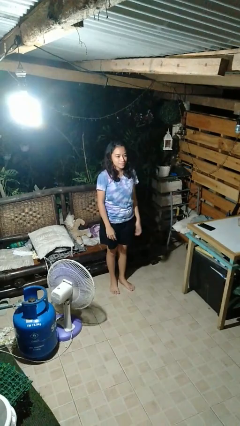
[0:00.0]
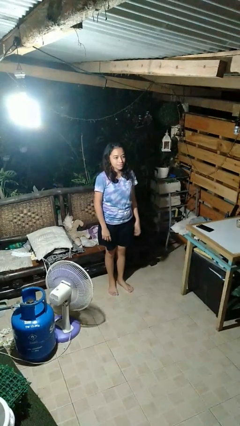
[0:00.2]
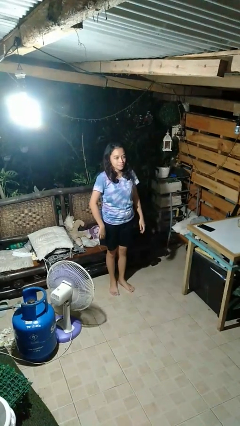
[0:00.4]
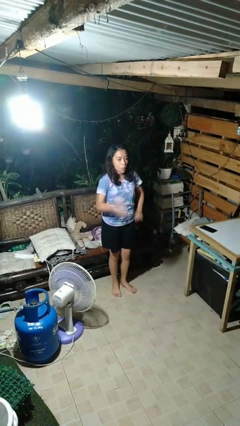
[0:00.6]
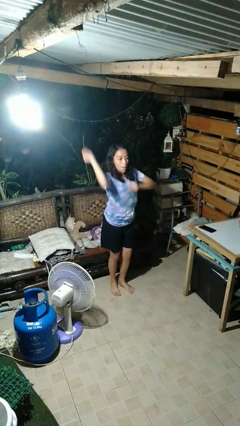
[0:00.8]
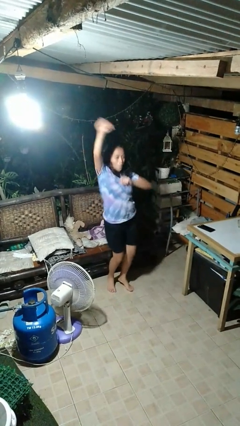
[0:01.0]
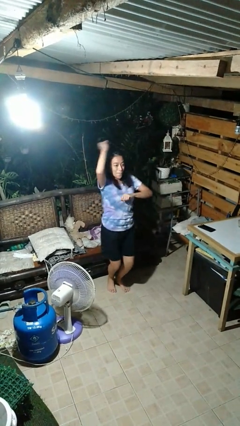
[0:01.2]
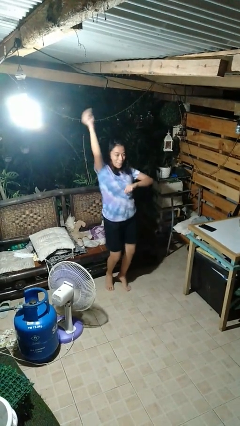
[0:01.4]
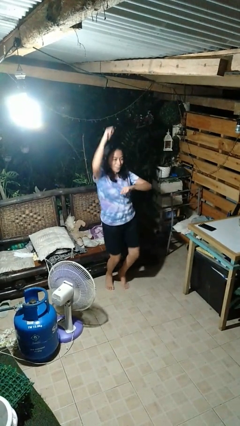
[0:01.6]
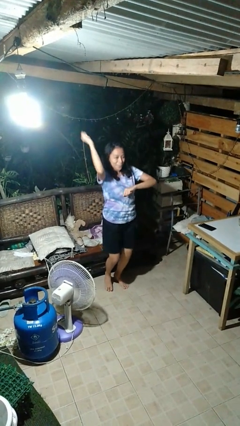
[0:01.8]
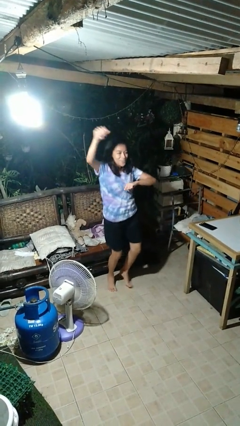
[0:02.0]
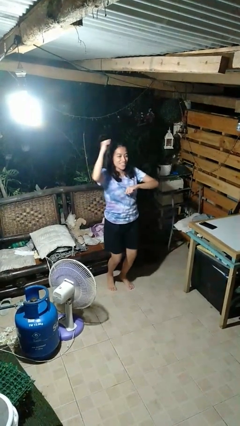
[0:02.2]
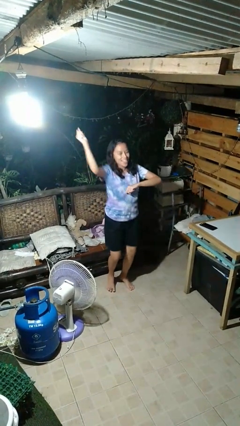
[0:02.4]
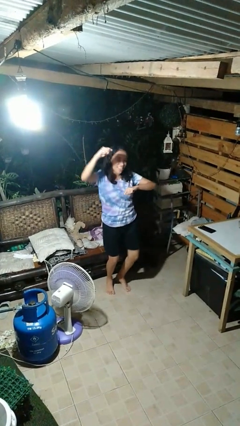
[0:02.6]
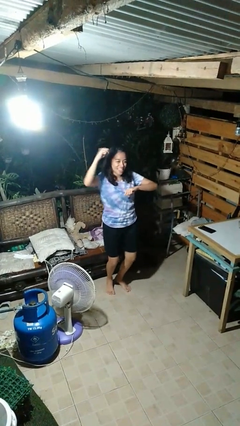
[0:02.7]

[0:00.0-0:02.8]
person dances in place

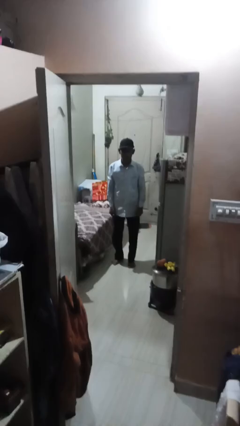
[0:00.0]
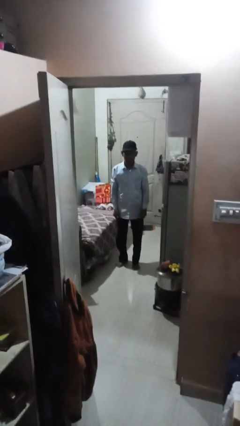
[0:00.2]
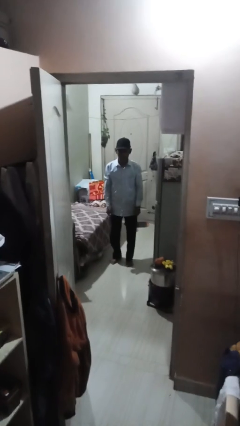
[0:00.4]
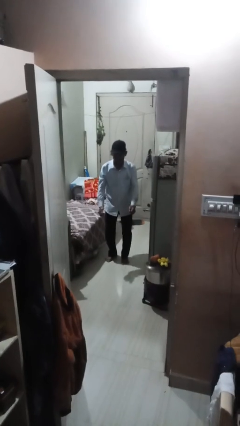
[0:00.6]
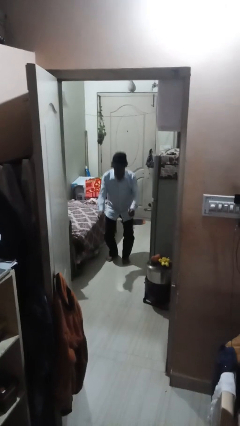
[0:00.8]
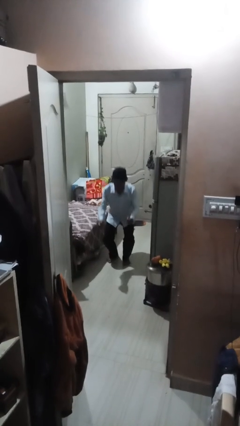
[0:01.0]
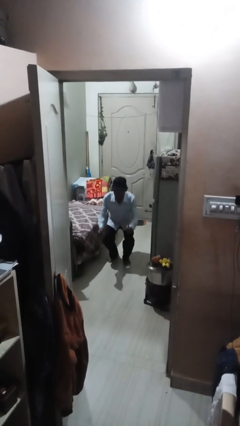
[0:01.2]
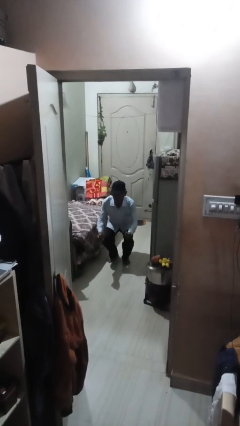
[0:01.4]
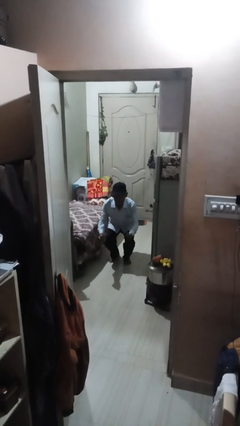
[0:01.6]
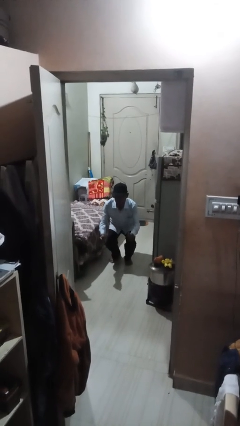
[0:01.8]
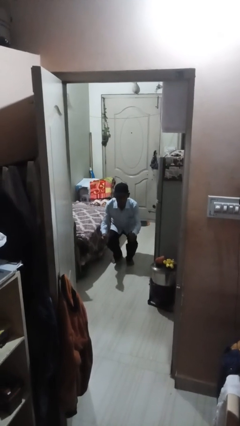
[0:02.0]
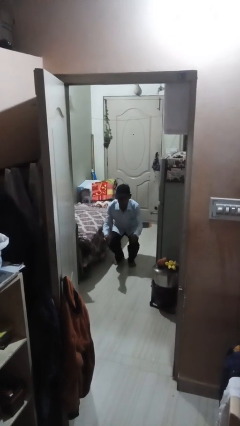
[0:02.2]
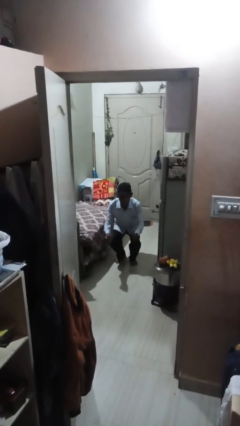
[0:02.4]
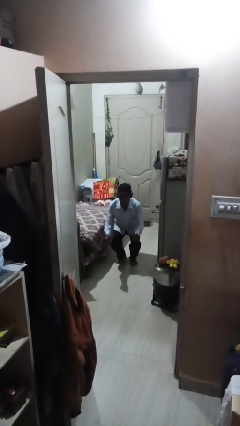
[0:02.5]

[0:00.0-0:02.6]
person squats

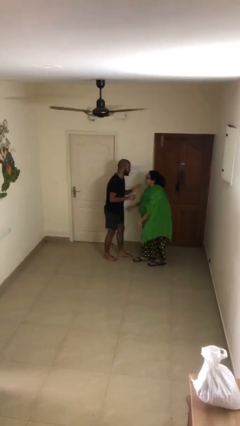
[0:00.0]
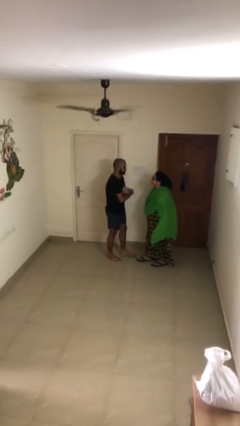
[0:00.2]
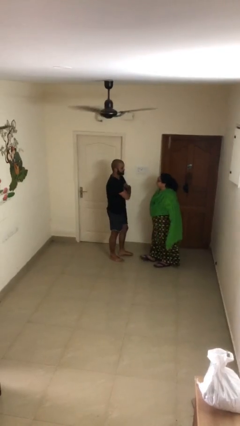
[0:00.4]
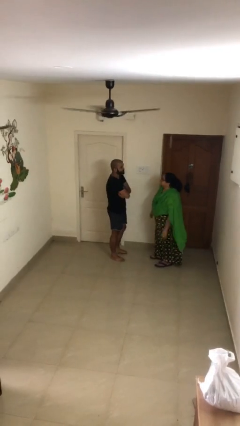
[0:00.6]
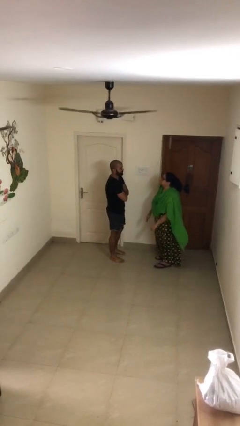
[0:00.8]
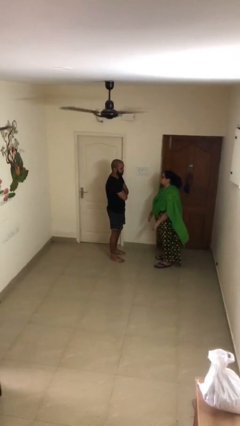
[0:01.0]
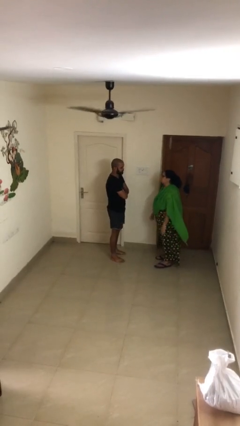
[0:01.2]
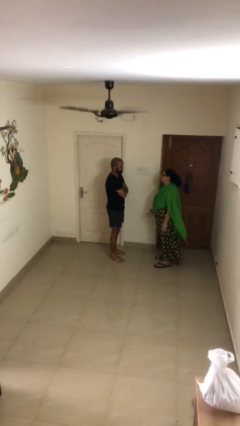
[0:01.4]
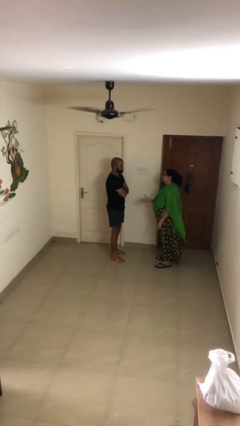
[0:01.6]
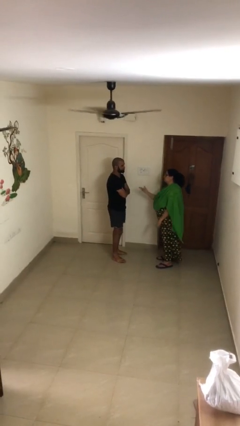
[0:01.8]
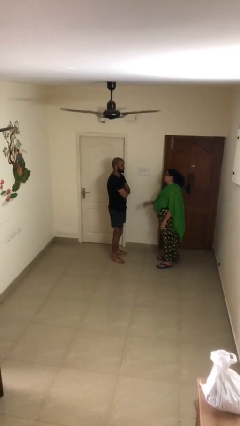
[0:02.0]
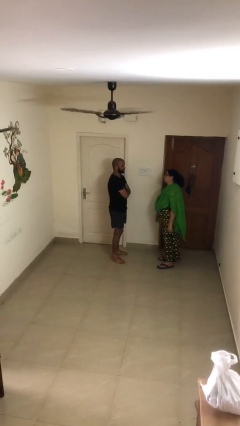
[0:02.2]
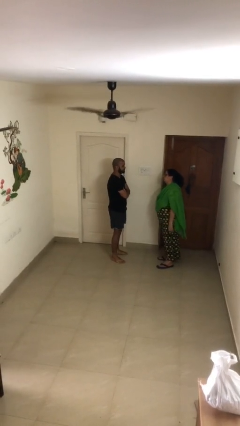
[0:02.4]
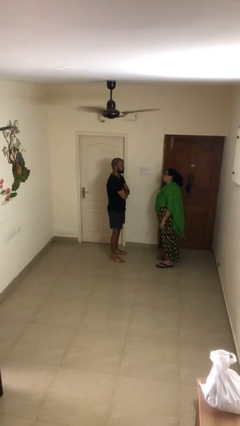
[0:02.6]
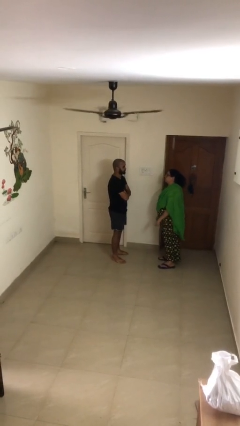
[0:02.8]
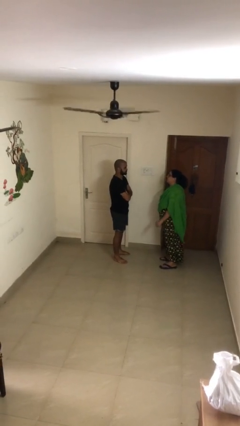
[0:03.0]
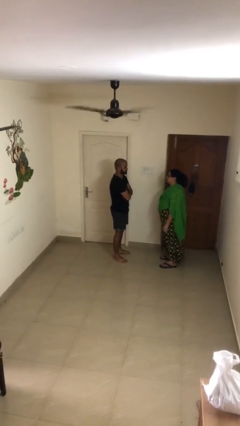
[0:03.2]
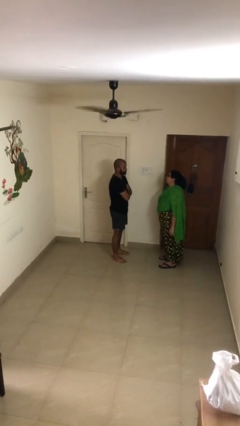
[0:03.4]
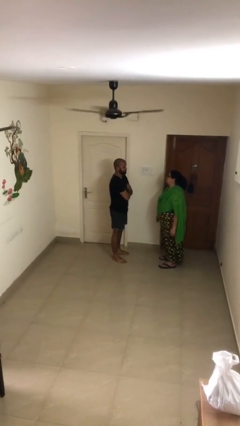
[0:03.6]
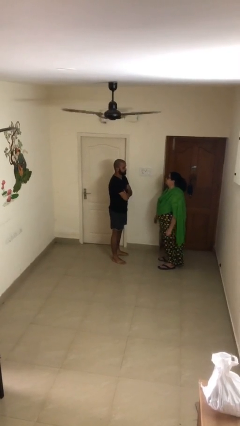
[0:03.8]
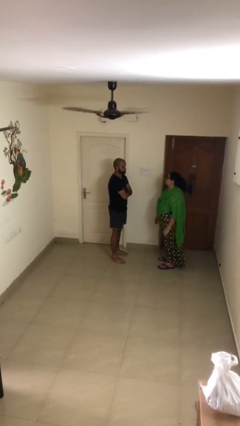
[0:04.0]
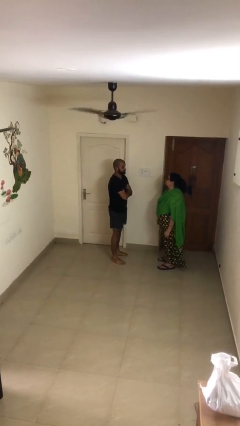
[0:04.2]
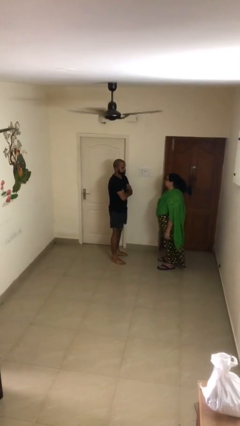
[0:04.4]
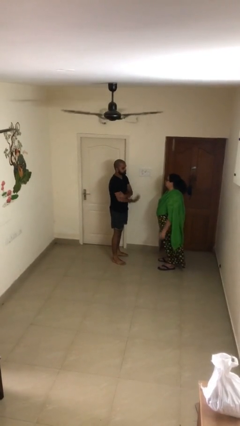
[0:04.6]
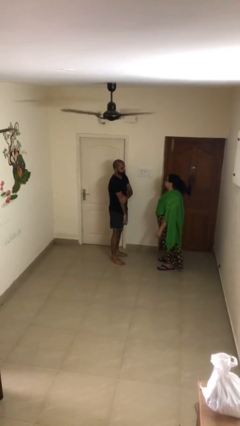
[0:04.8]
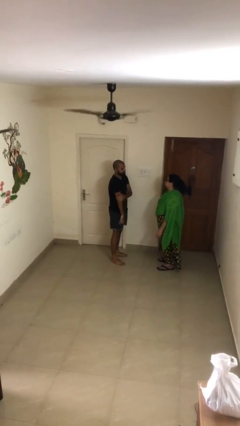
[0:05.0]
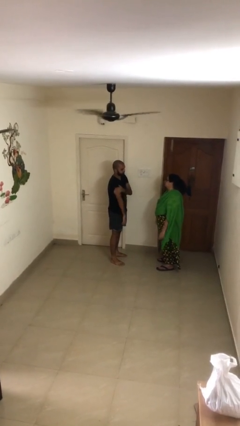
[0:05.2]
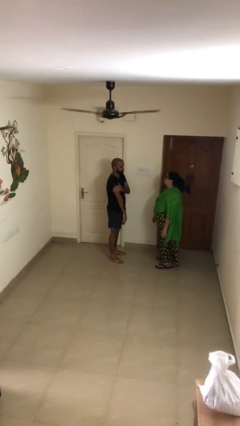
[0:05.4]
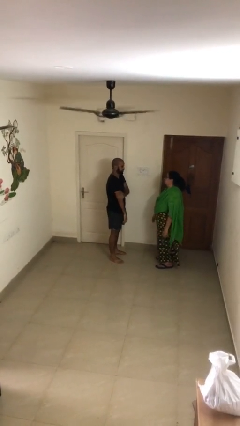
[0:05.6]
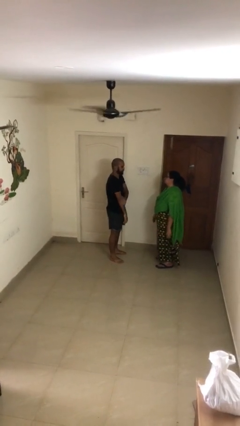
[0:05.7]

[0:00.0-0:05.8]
person talks to person

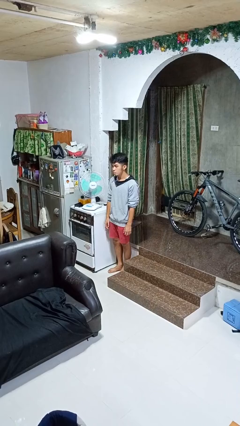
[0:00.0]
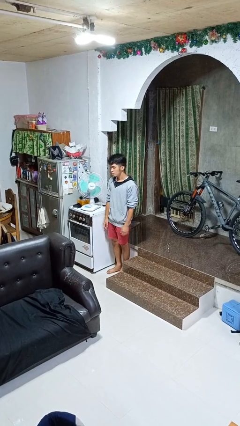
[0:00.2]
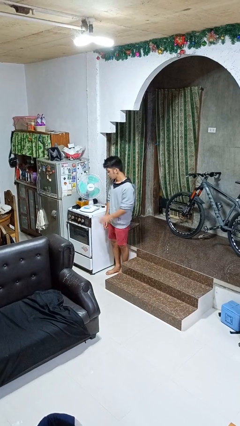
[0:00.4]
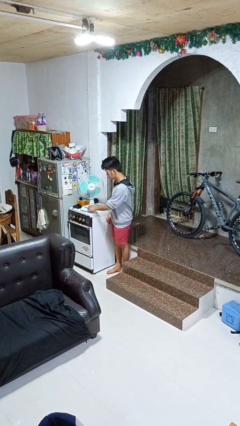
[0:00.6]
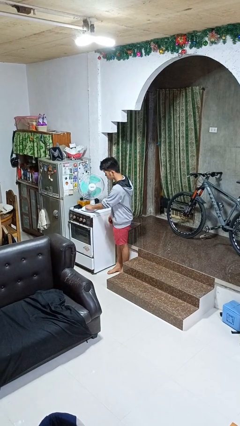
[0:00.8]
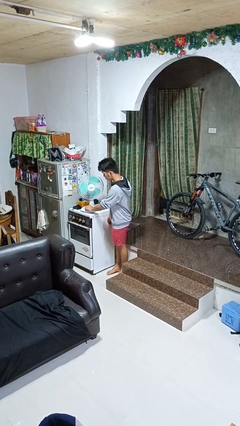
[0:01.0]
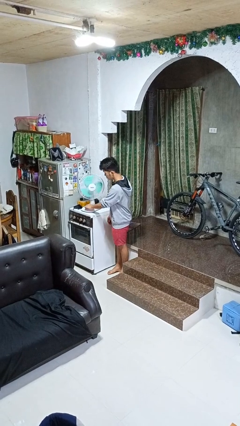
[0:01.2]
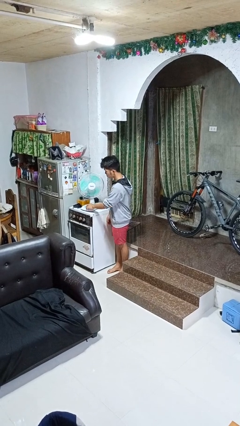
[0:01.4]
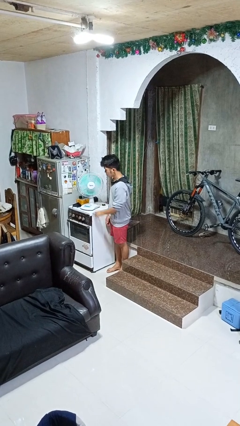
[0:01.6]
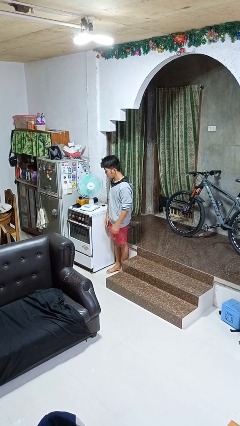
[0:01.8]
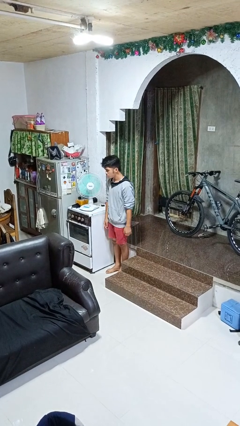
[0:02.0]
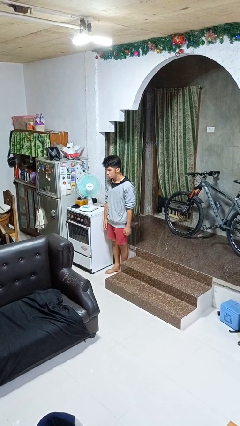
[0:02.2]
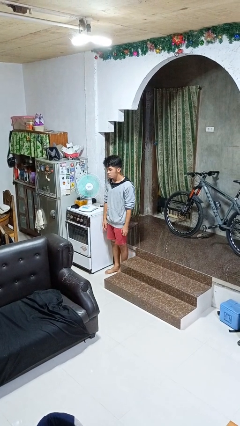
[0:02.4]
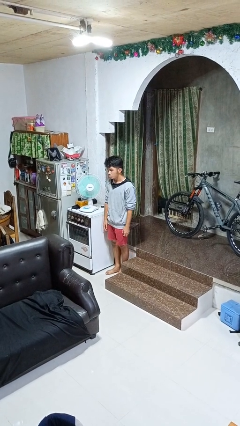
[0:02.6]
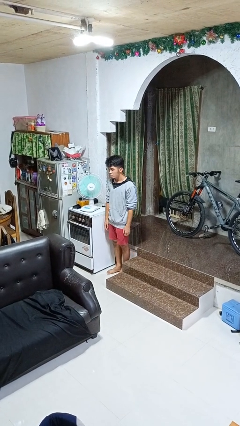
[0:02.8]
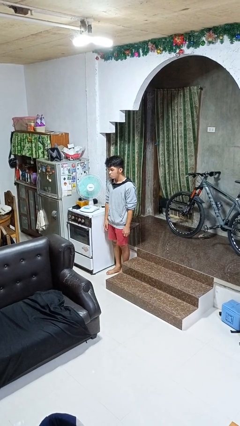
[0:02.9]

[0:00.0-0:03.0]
person turns on fan

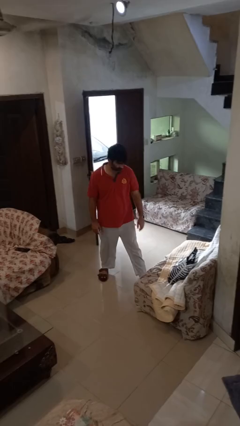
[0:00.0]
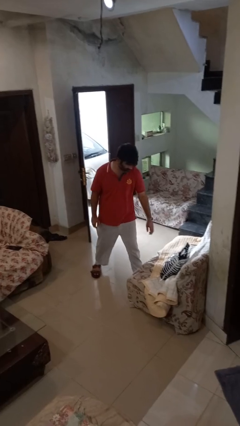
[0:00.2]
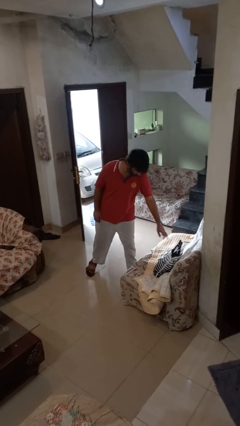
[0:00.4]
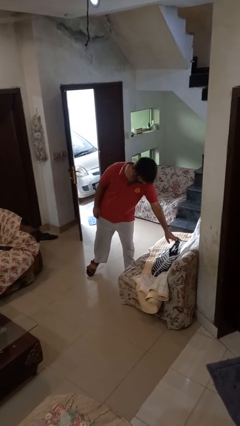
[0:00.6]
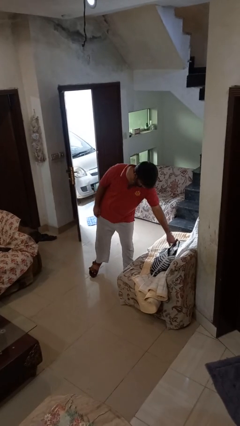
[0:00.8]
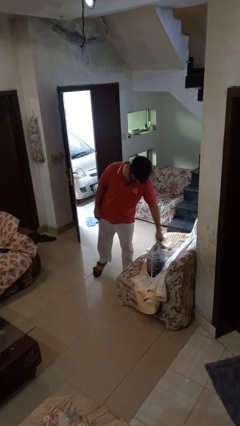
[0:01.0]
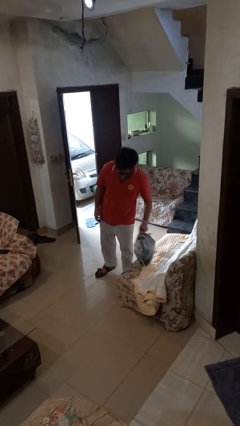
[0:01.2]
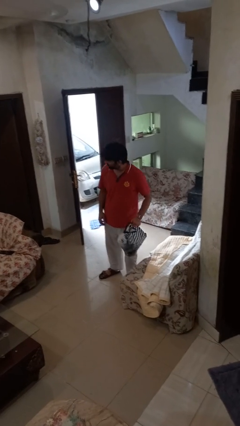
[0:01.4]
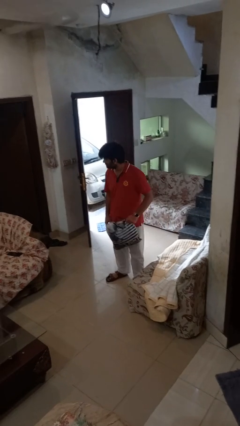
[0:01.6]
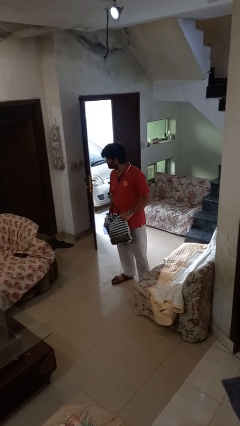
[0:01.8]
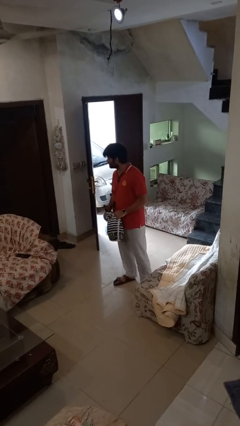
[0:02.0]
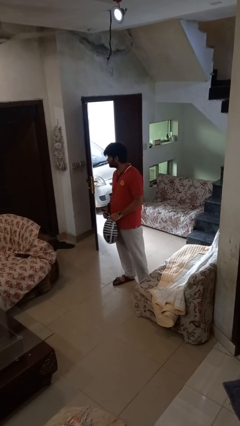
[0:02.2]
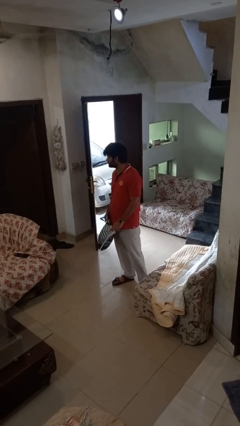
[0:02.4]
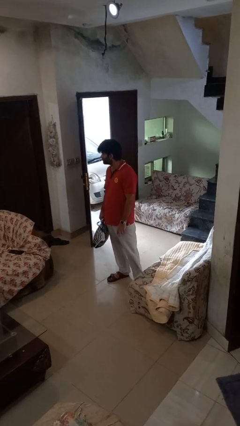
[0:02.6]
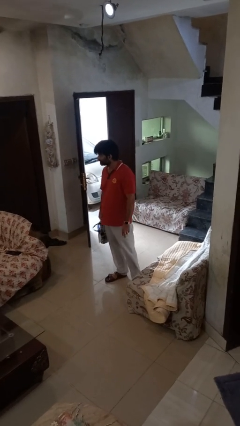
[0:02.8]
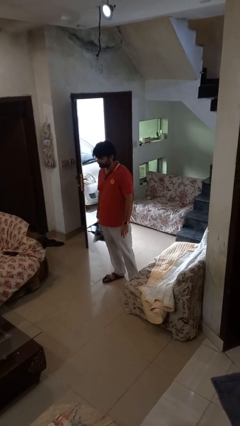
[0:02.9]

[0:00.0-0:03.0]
person picks up object from couch
